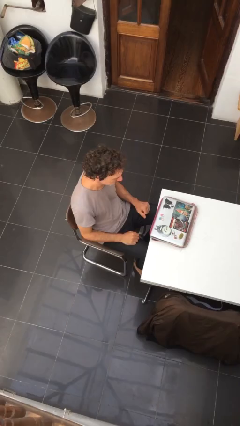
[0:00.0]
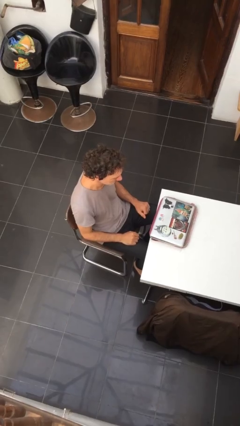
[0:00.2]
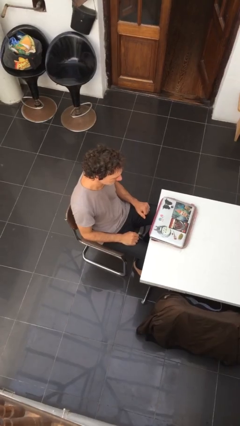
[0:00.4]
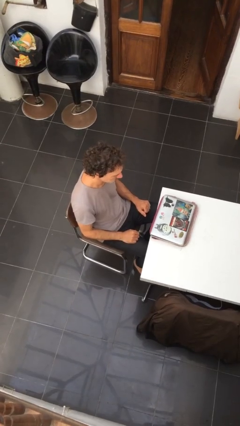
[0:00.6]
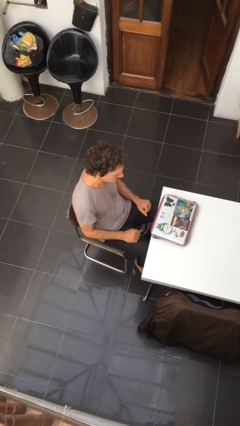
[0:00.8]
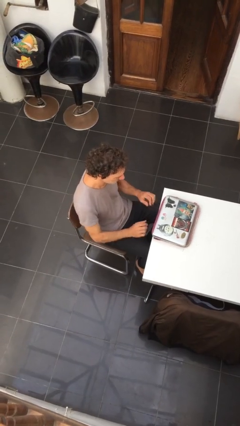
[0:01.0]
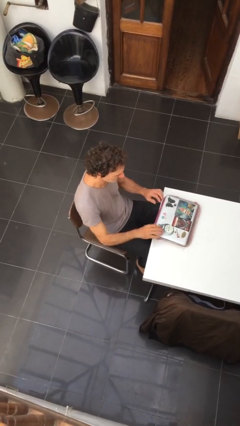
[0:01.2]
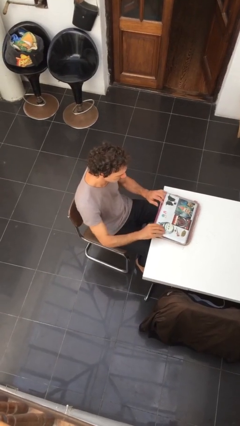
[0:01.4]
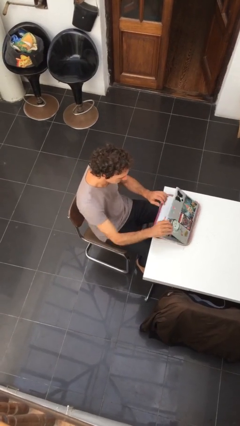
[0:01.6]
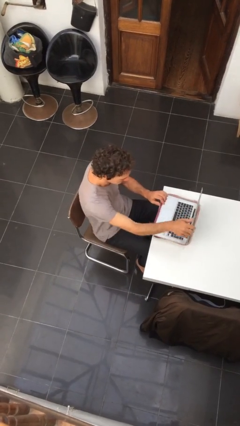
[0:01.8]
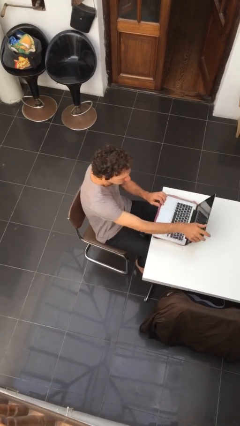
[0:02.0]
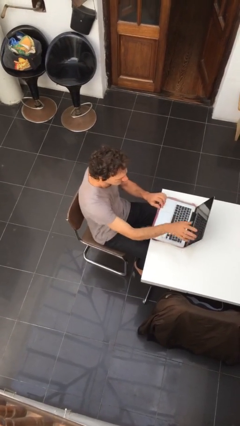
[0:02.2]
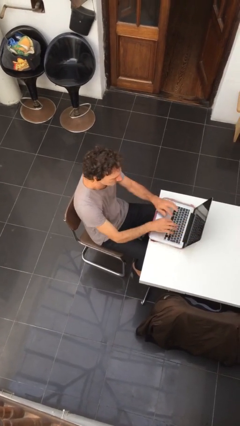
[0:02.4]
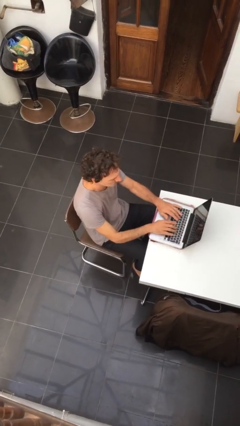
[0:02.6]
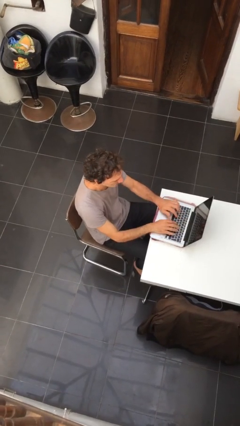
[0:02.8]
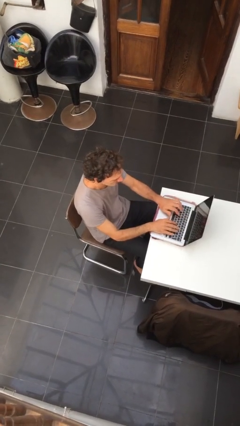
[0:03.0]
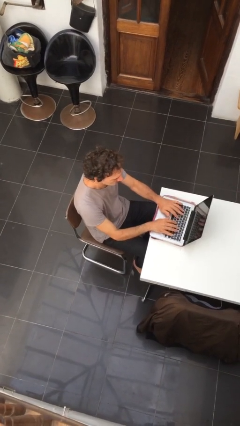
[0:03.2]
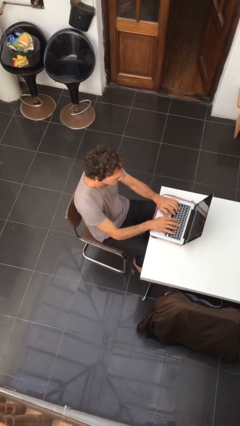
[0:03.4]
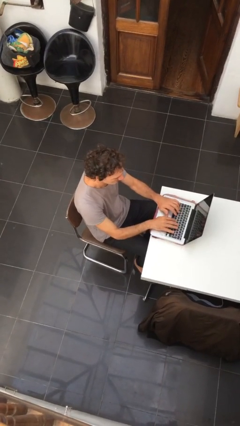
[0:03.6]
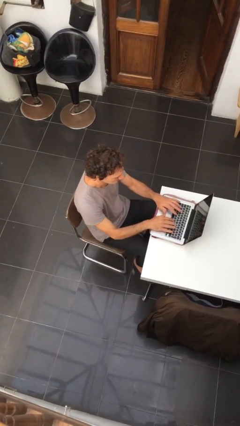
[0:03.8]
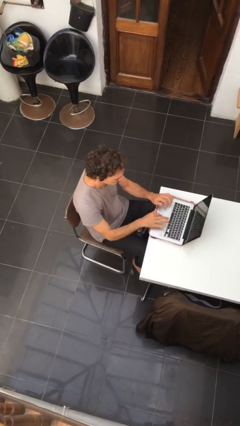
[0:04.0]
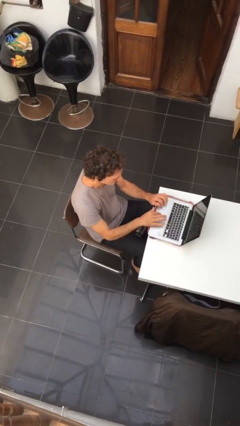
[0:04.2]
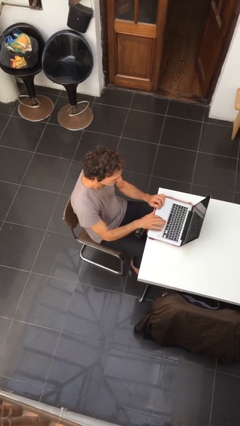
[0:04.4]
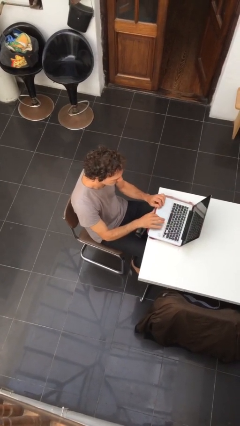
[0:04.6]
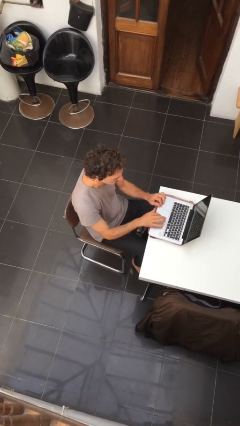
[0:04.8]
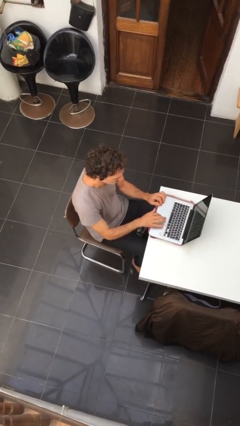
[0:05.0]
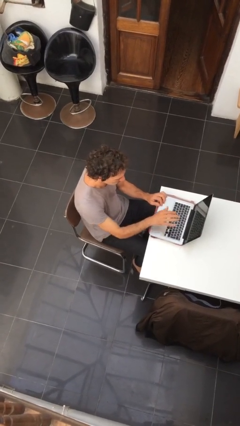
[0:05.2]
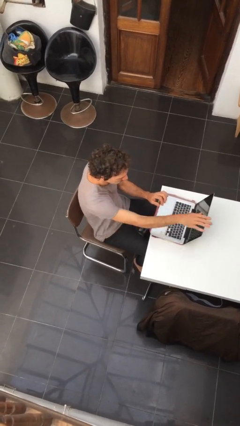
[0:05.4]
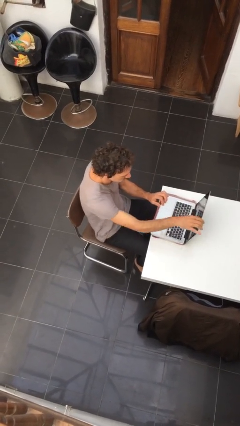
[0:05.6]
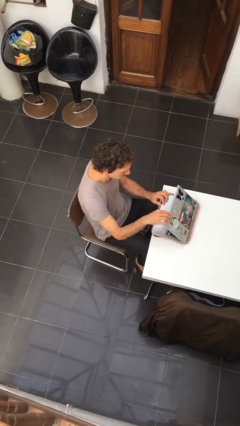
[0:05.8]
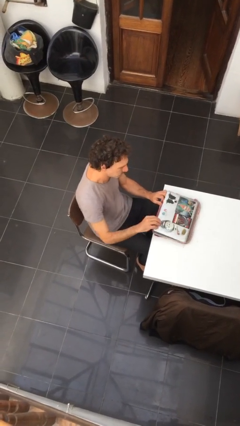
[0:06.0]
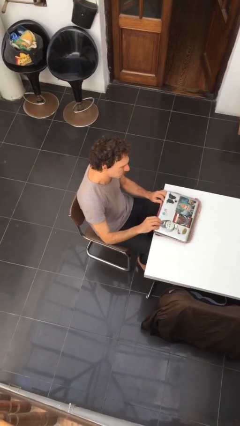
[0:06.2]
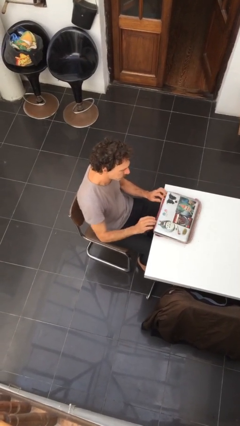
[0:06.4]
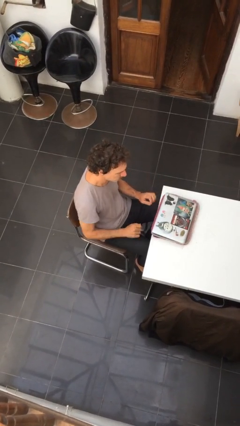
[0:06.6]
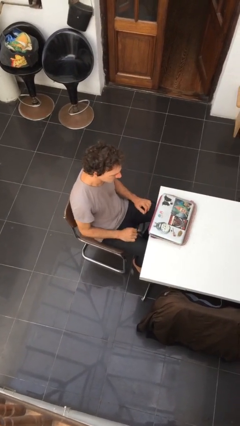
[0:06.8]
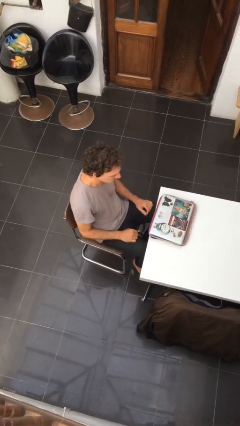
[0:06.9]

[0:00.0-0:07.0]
person interacts with laptop

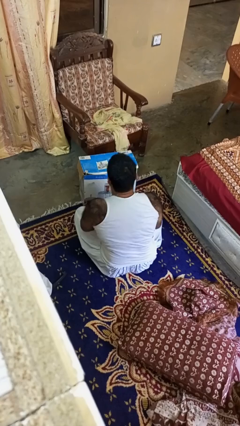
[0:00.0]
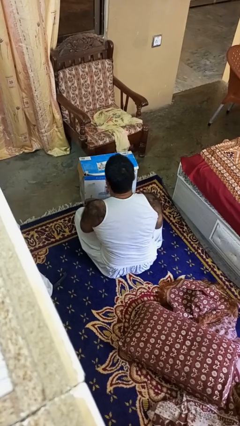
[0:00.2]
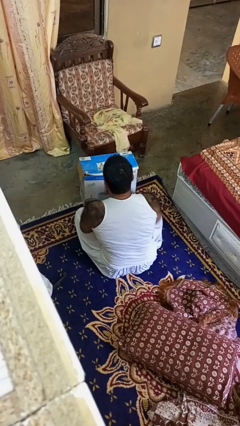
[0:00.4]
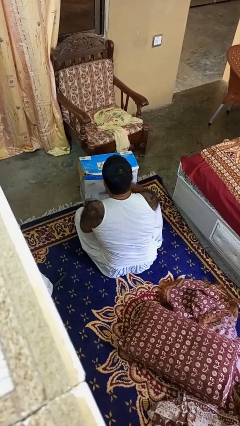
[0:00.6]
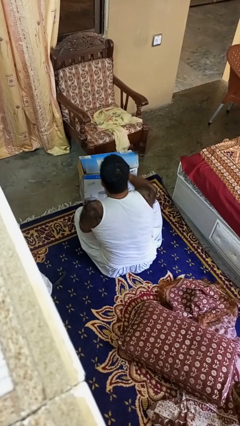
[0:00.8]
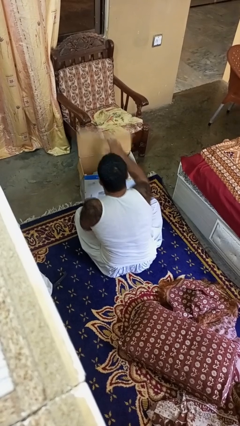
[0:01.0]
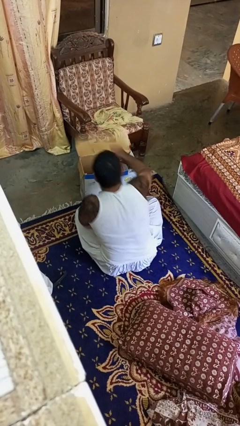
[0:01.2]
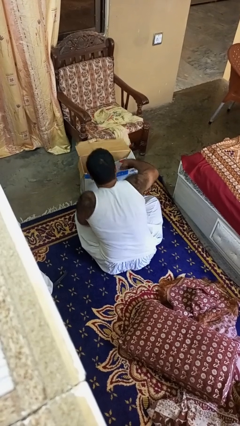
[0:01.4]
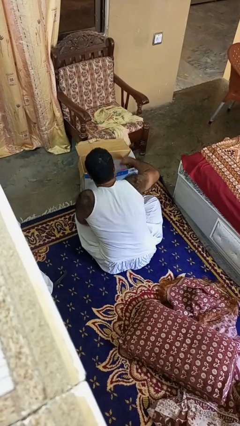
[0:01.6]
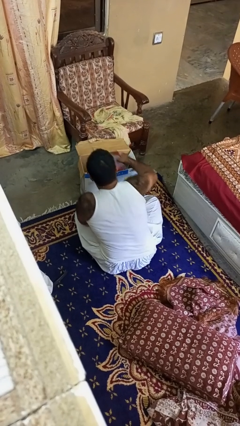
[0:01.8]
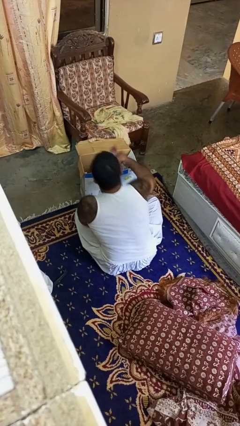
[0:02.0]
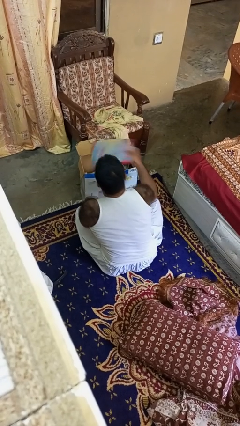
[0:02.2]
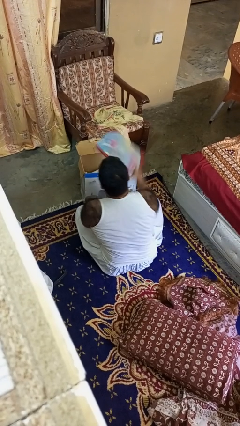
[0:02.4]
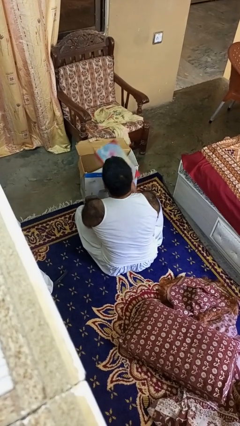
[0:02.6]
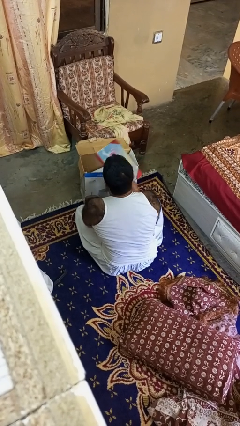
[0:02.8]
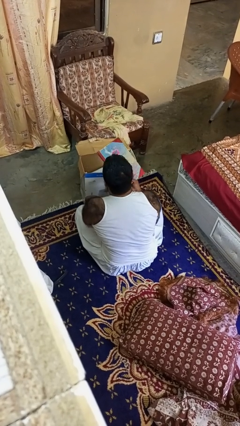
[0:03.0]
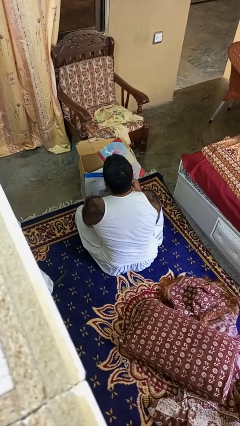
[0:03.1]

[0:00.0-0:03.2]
person takes object from box

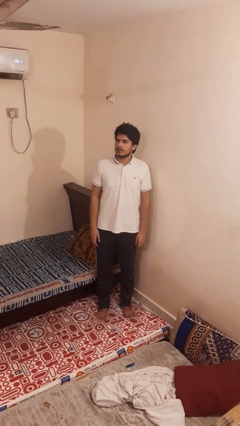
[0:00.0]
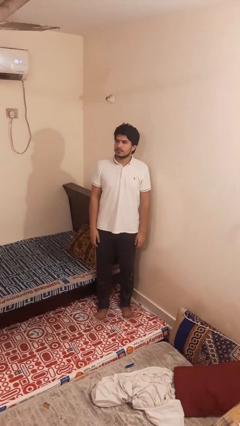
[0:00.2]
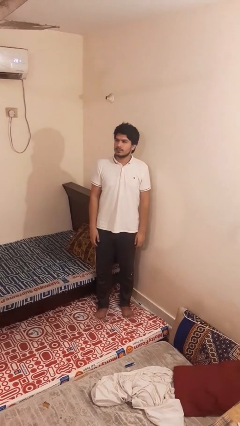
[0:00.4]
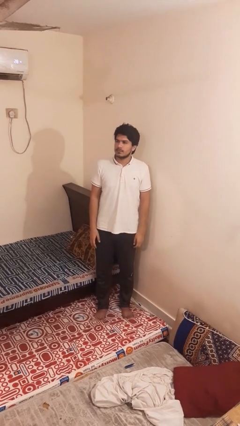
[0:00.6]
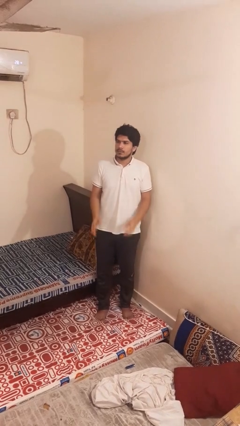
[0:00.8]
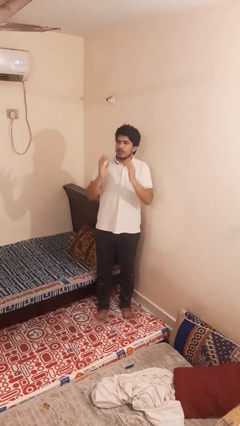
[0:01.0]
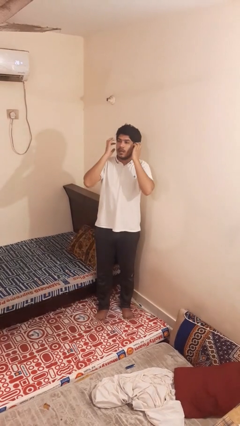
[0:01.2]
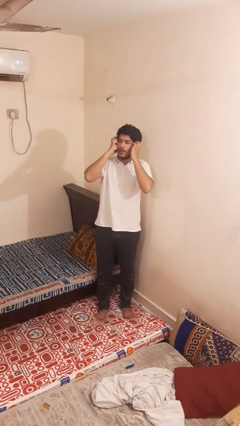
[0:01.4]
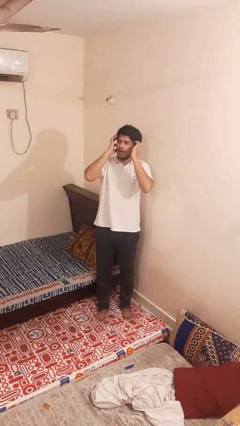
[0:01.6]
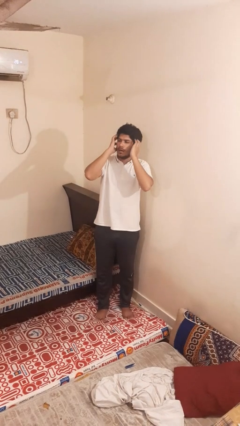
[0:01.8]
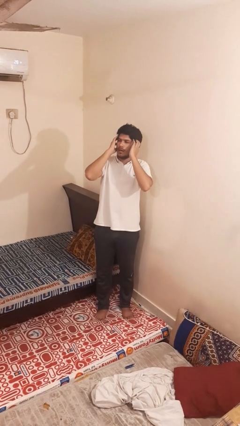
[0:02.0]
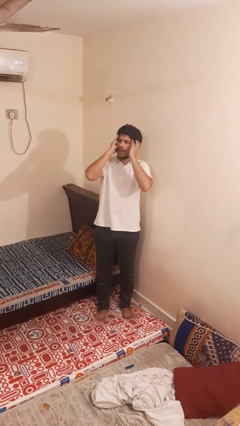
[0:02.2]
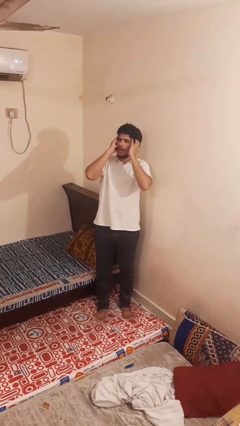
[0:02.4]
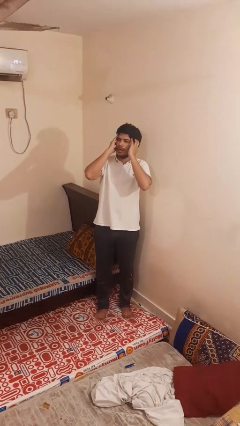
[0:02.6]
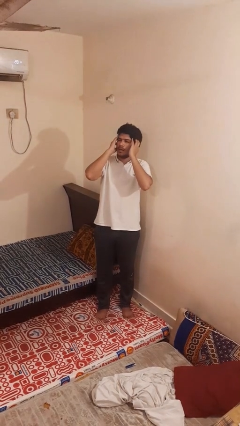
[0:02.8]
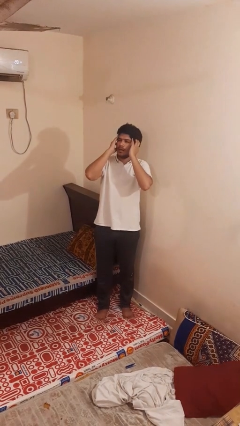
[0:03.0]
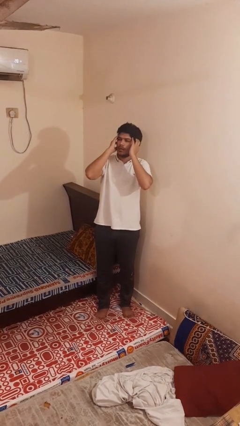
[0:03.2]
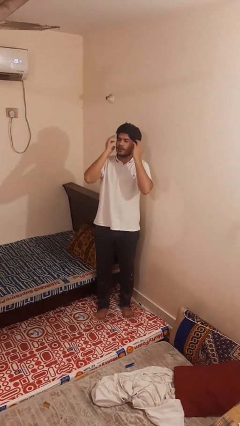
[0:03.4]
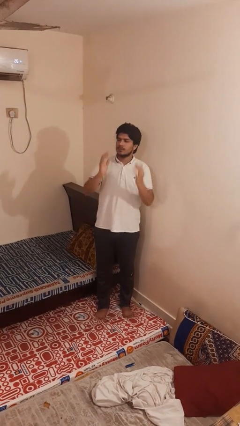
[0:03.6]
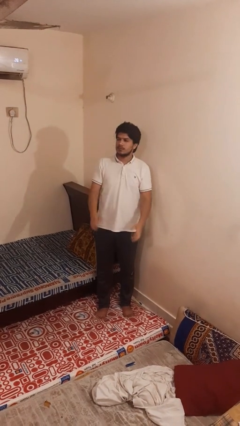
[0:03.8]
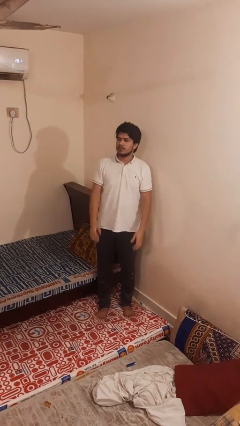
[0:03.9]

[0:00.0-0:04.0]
person puts fingers in ear

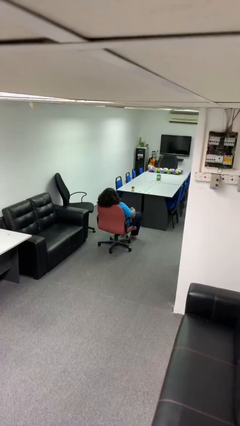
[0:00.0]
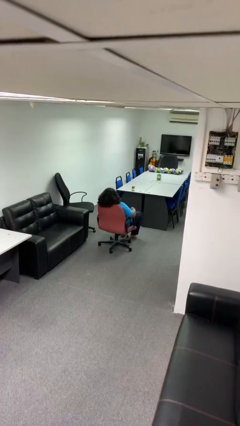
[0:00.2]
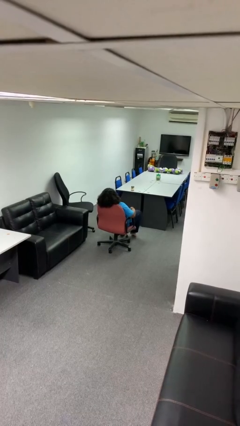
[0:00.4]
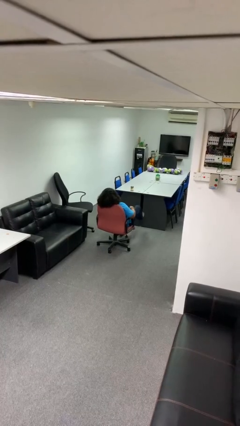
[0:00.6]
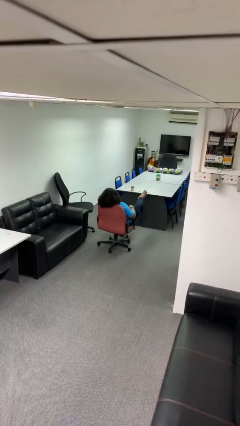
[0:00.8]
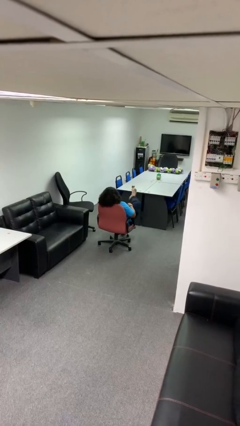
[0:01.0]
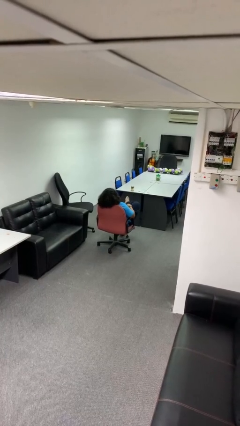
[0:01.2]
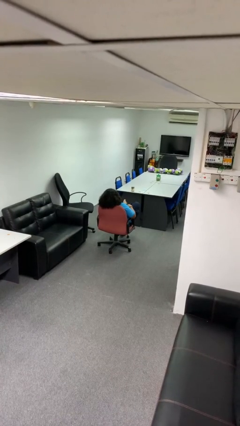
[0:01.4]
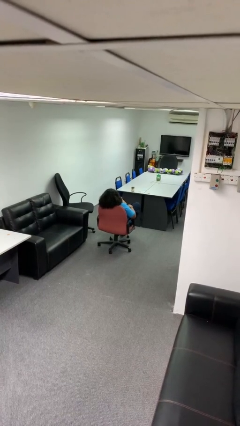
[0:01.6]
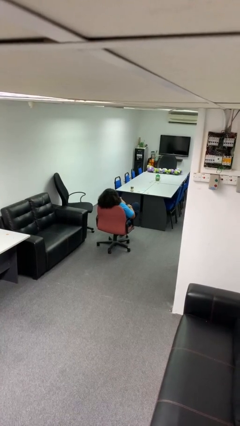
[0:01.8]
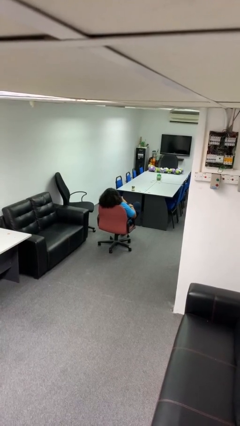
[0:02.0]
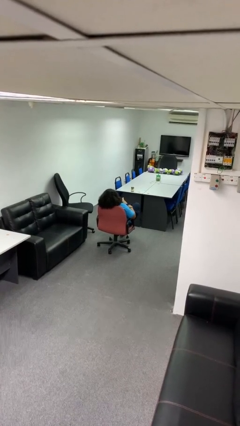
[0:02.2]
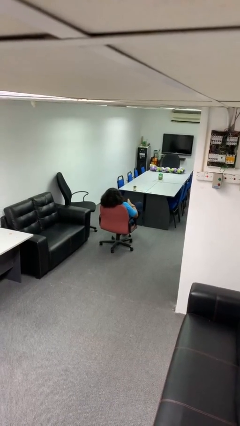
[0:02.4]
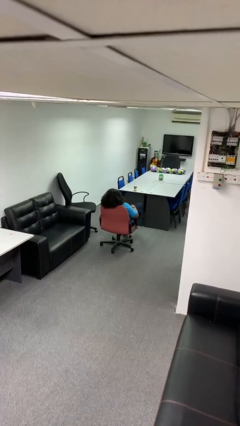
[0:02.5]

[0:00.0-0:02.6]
person crosses legs

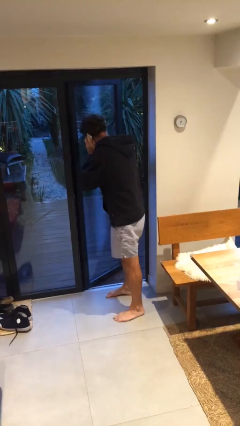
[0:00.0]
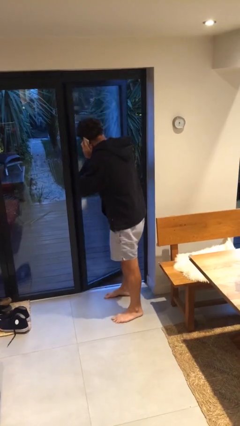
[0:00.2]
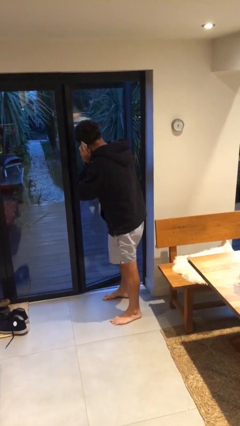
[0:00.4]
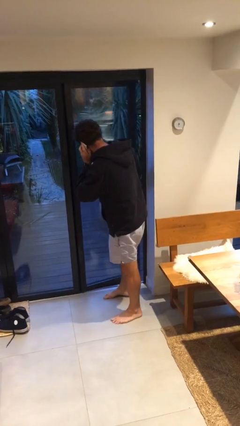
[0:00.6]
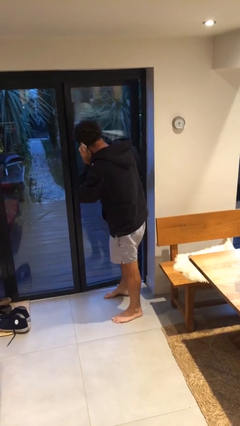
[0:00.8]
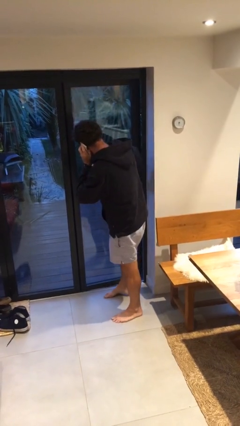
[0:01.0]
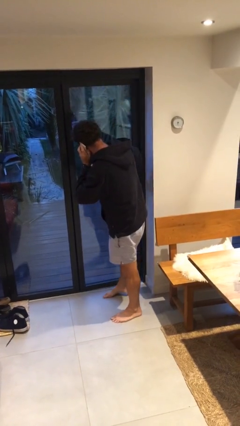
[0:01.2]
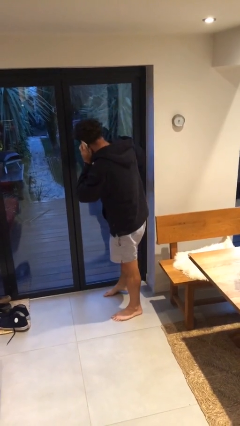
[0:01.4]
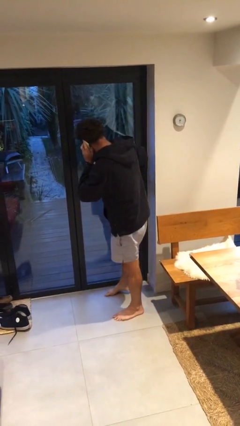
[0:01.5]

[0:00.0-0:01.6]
person closes facility door
